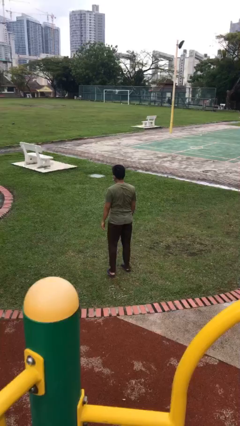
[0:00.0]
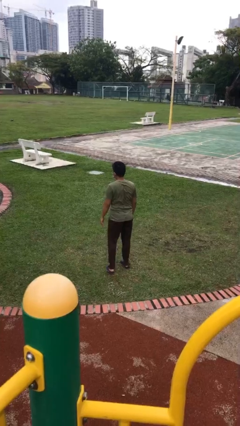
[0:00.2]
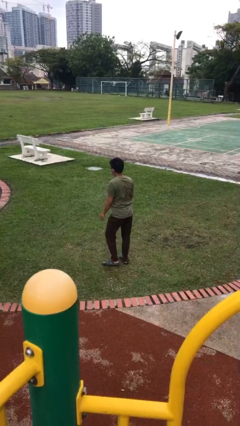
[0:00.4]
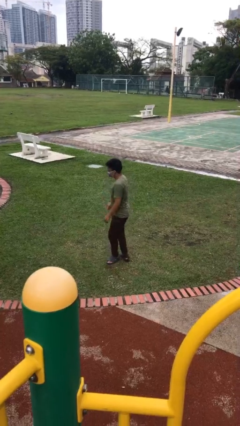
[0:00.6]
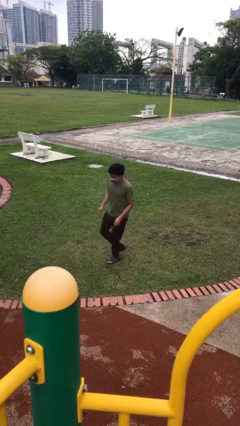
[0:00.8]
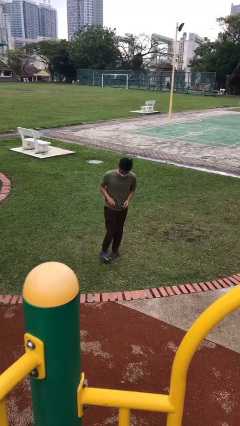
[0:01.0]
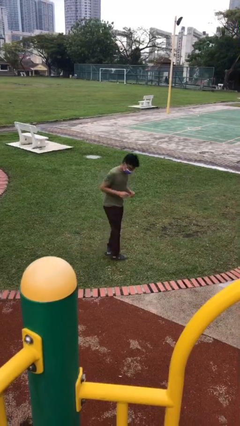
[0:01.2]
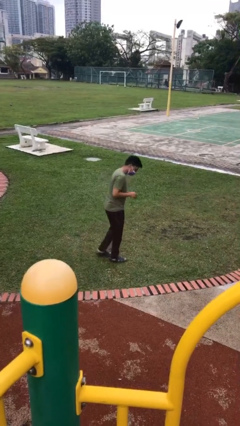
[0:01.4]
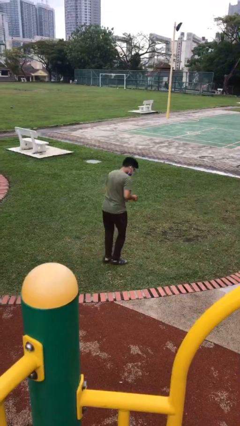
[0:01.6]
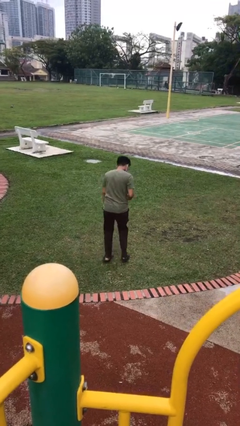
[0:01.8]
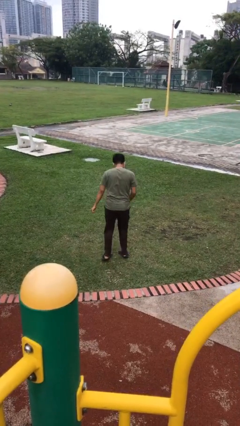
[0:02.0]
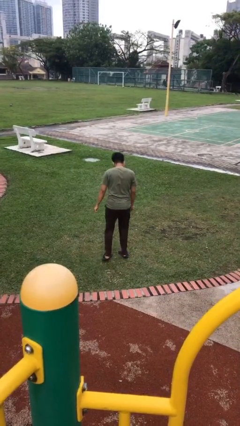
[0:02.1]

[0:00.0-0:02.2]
person twirls

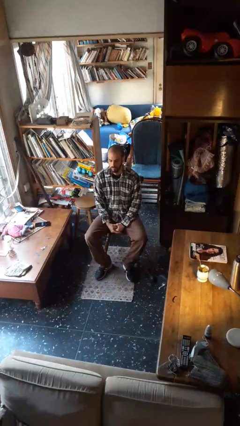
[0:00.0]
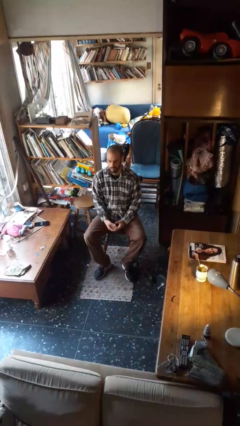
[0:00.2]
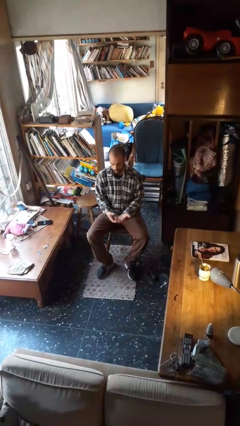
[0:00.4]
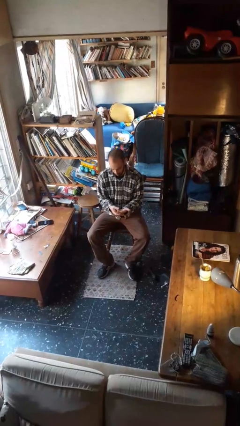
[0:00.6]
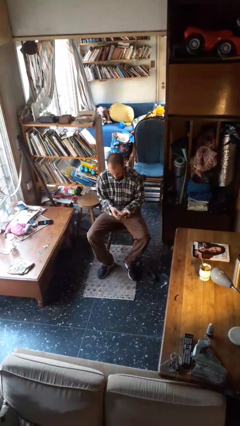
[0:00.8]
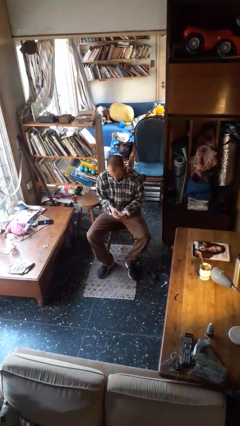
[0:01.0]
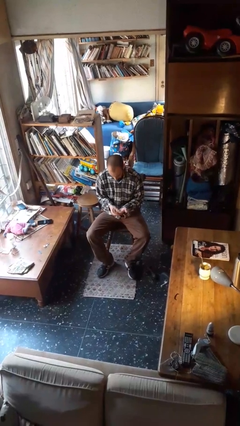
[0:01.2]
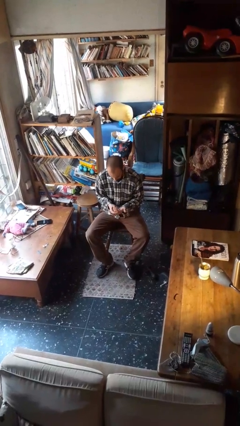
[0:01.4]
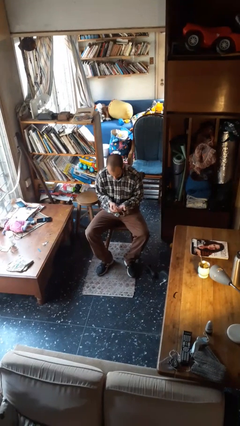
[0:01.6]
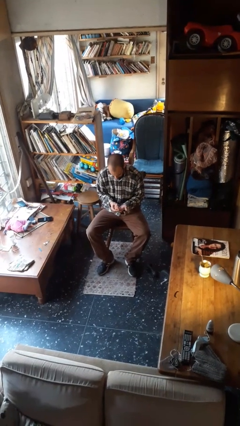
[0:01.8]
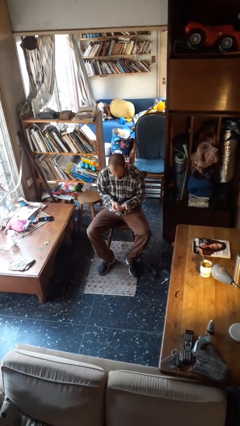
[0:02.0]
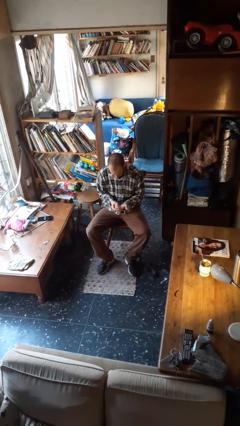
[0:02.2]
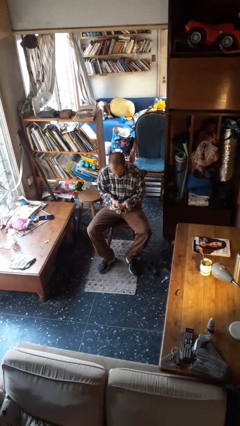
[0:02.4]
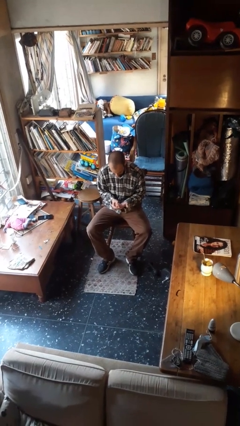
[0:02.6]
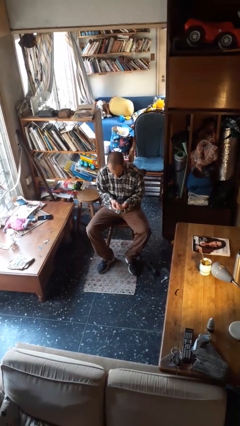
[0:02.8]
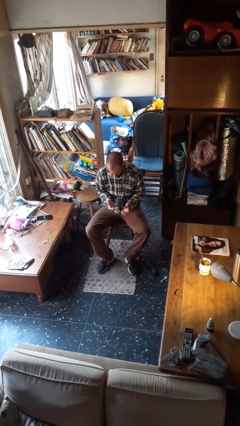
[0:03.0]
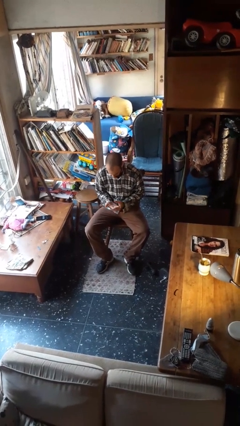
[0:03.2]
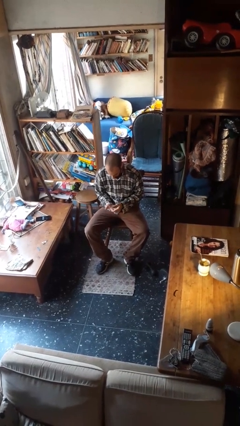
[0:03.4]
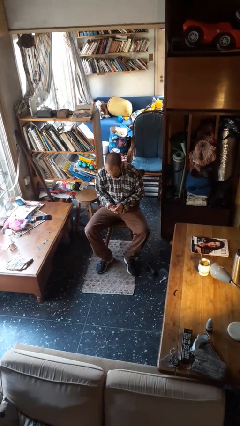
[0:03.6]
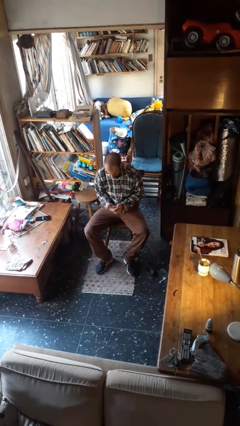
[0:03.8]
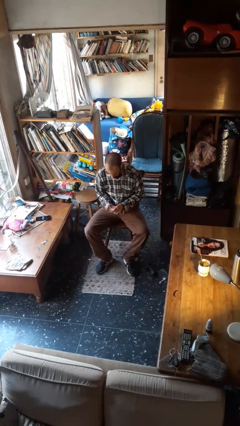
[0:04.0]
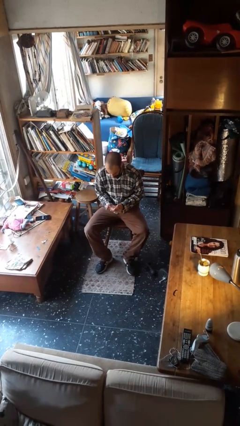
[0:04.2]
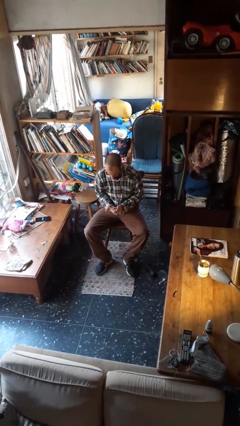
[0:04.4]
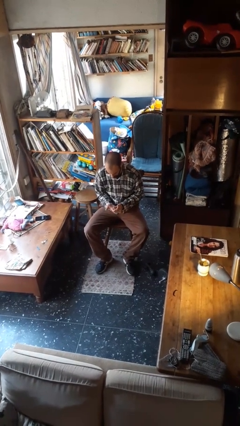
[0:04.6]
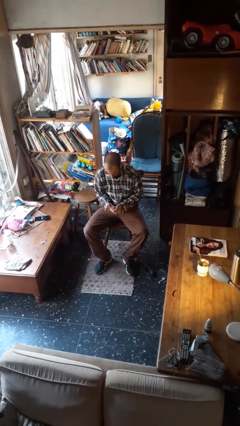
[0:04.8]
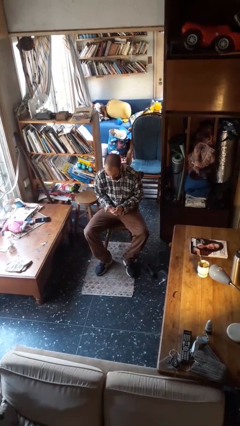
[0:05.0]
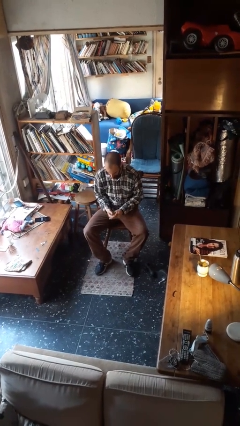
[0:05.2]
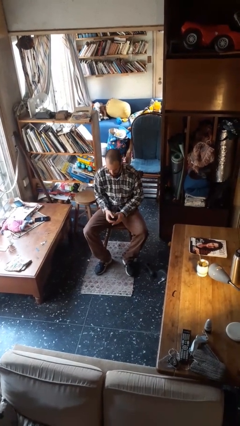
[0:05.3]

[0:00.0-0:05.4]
person looks at hands in lap

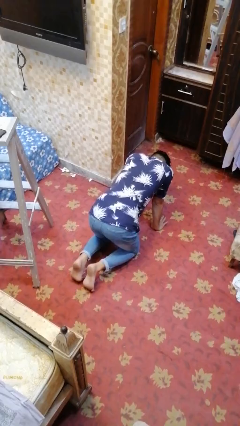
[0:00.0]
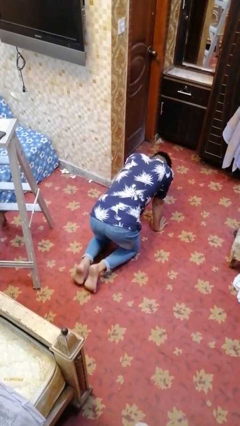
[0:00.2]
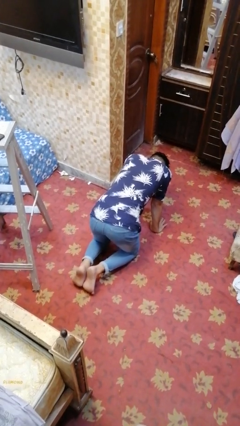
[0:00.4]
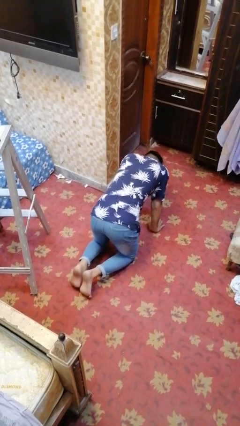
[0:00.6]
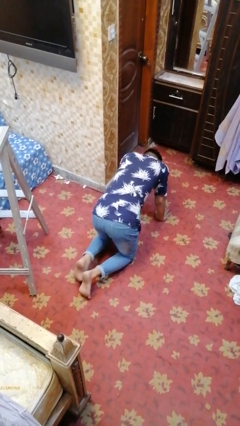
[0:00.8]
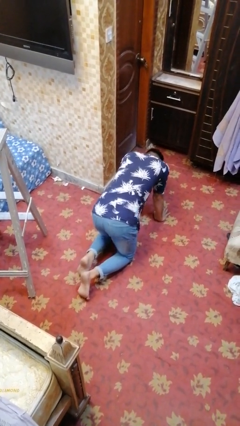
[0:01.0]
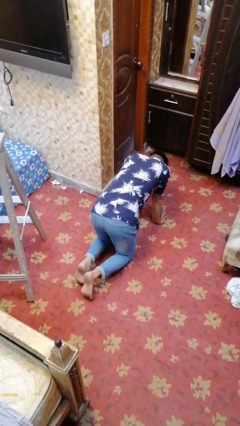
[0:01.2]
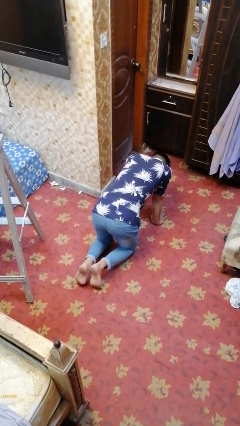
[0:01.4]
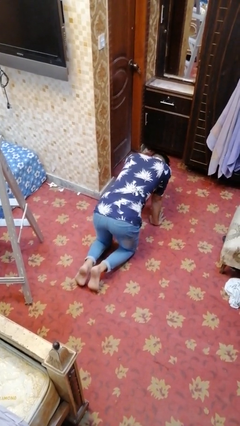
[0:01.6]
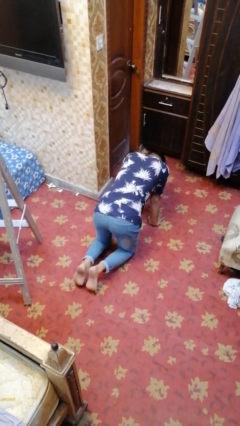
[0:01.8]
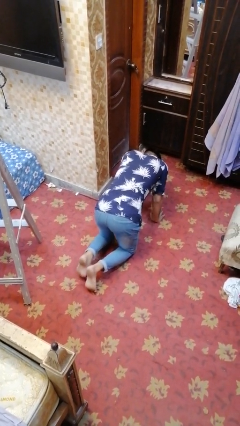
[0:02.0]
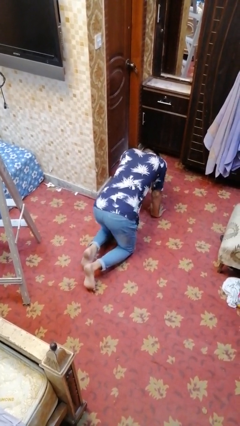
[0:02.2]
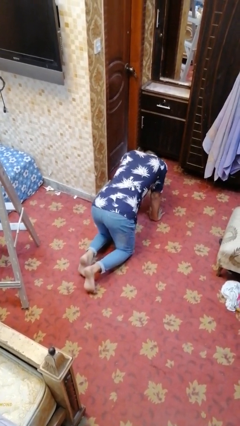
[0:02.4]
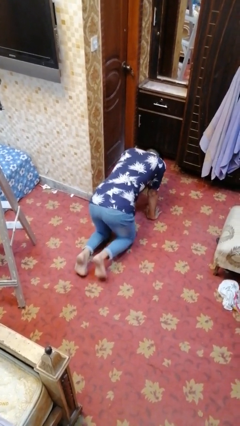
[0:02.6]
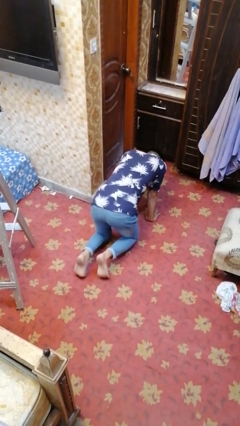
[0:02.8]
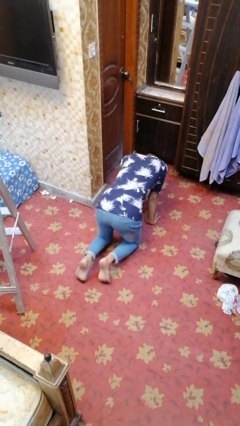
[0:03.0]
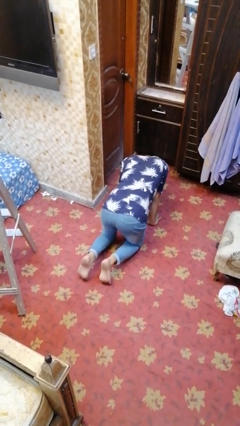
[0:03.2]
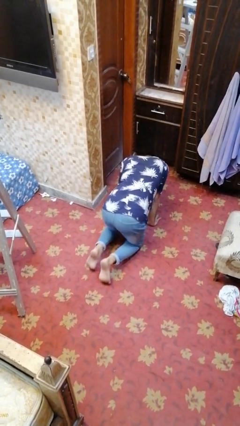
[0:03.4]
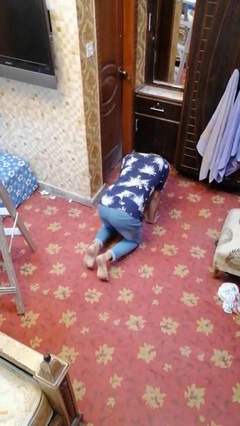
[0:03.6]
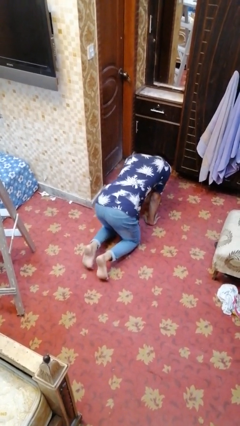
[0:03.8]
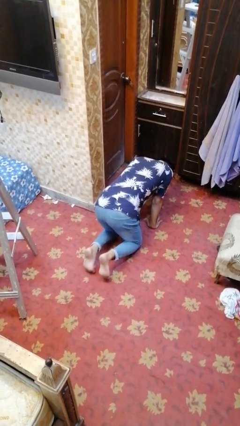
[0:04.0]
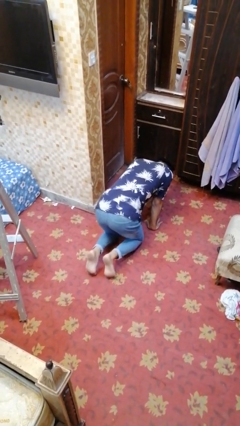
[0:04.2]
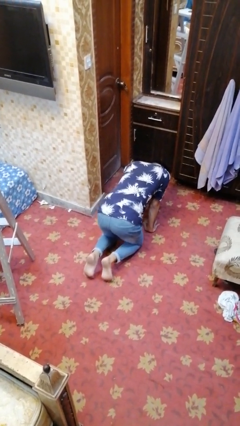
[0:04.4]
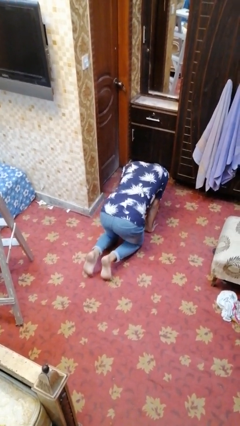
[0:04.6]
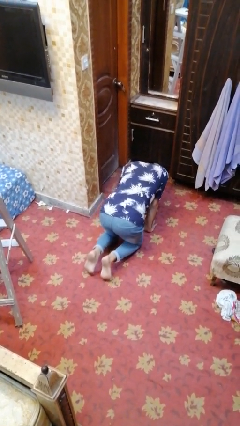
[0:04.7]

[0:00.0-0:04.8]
person crawls

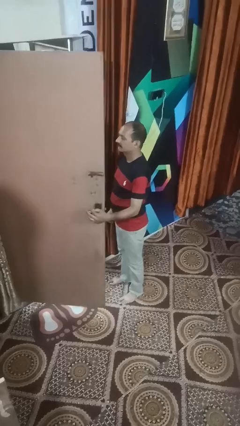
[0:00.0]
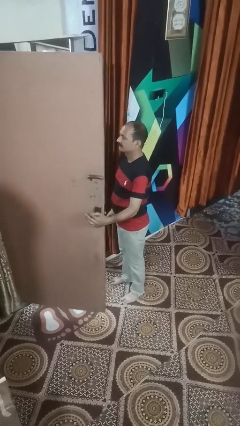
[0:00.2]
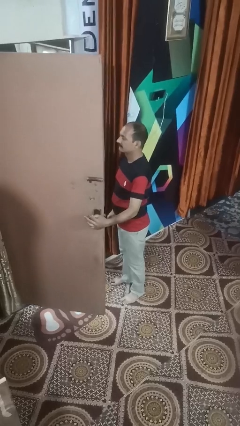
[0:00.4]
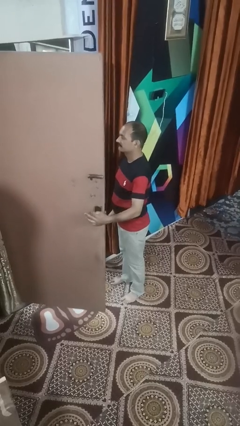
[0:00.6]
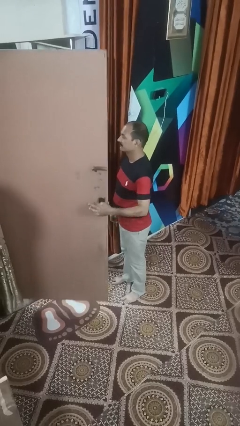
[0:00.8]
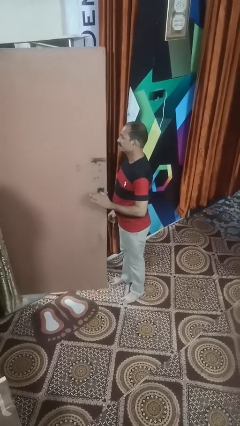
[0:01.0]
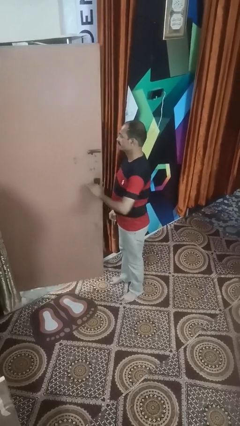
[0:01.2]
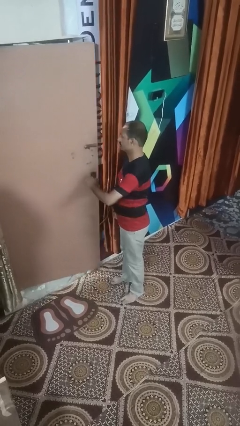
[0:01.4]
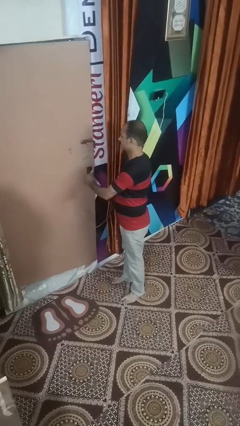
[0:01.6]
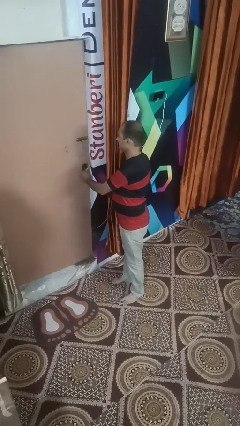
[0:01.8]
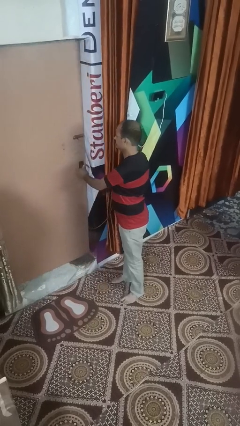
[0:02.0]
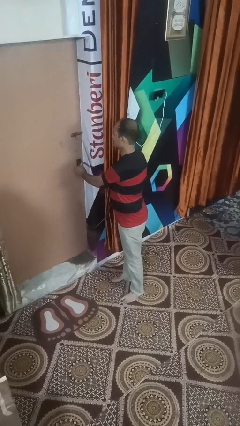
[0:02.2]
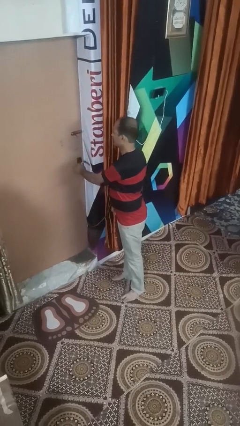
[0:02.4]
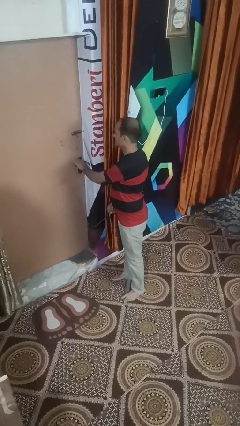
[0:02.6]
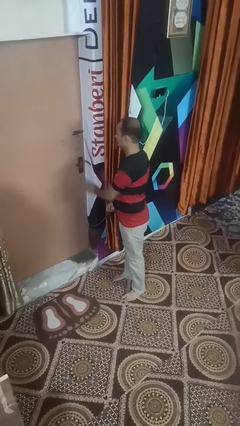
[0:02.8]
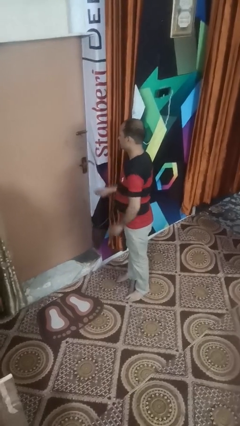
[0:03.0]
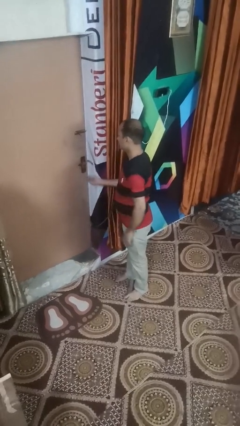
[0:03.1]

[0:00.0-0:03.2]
person closes facility door

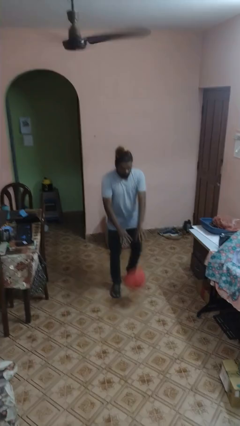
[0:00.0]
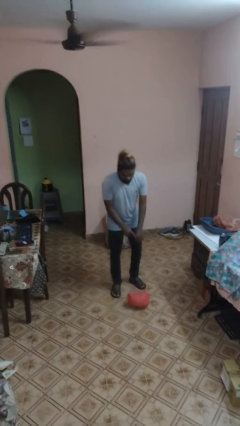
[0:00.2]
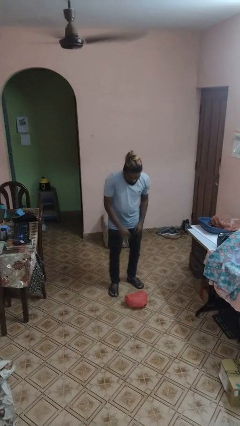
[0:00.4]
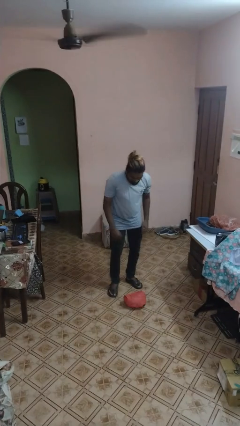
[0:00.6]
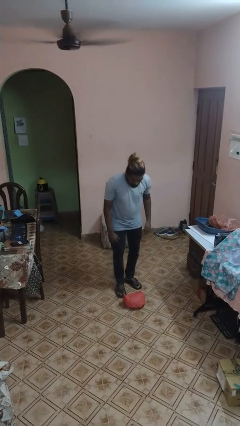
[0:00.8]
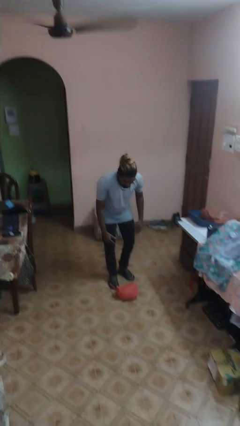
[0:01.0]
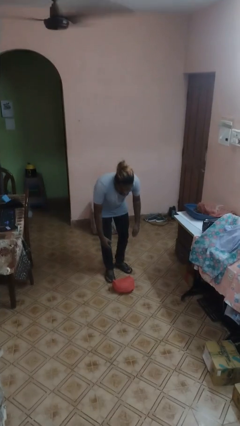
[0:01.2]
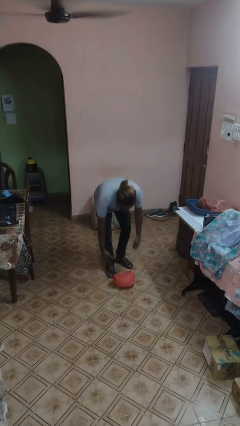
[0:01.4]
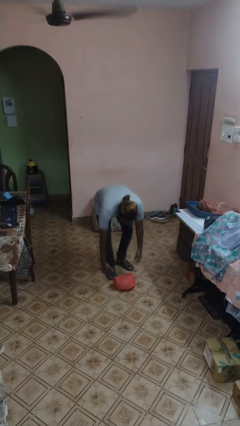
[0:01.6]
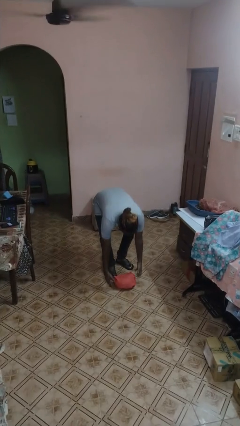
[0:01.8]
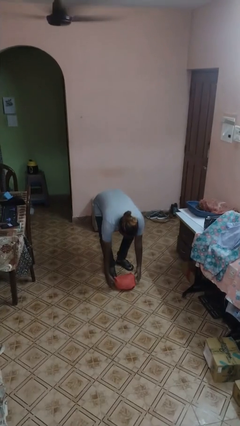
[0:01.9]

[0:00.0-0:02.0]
person drops object
